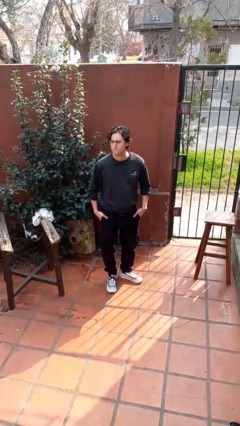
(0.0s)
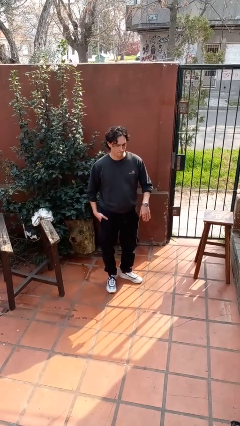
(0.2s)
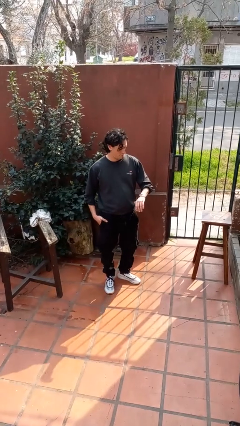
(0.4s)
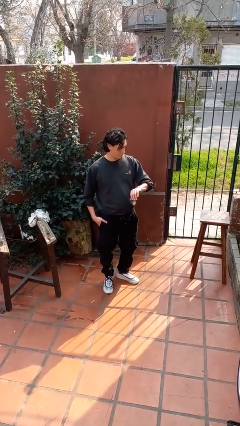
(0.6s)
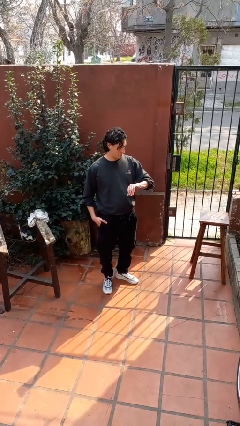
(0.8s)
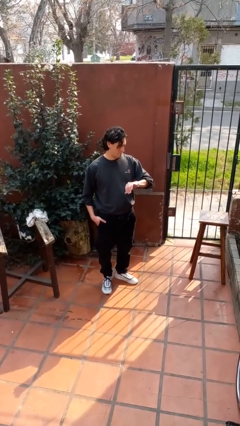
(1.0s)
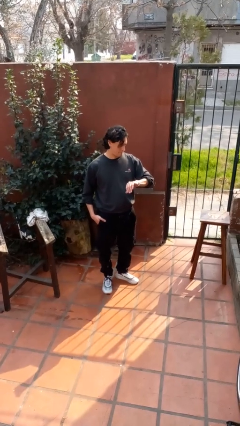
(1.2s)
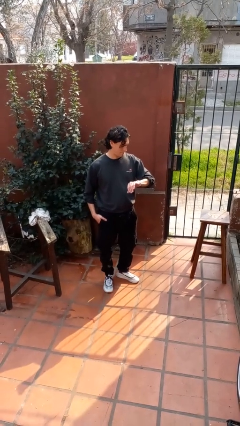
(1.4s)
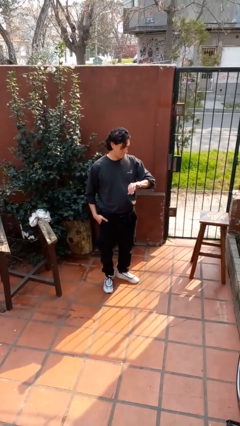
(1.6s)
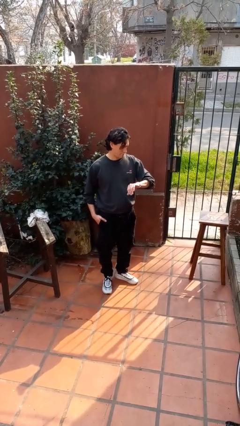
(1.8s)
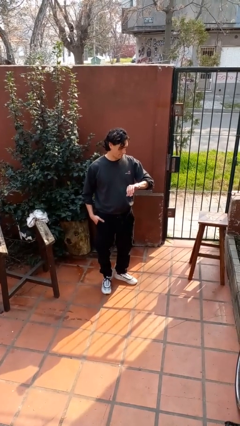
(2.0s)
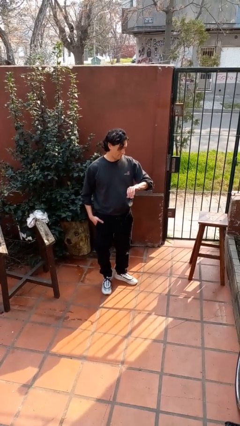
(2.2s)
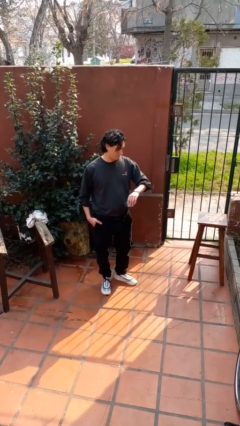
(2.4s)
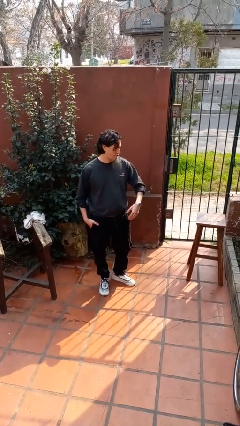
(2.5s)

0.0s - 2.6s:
person looks at wristwatch

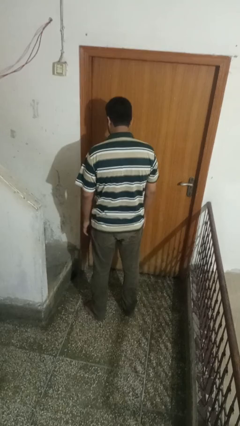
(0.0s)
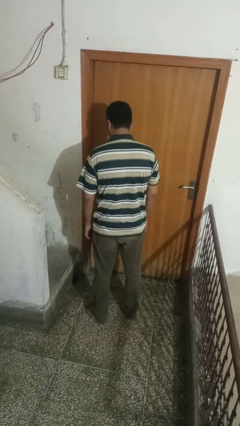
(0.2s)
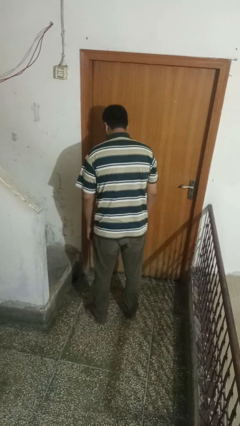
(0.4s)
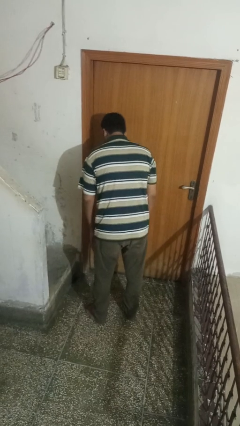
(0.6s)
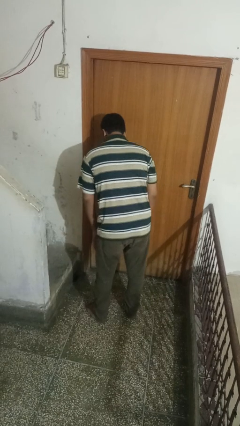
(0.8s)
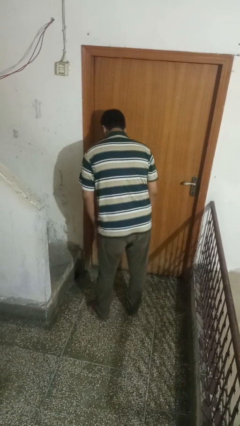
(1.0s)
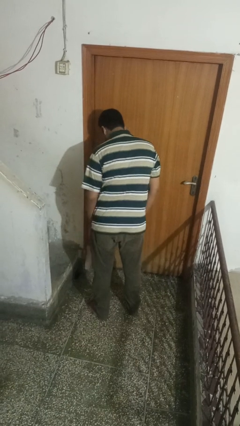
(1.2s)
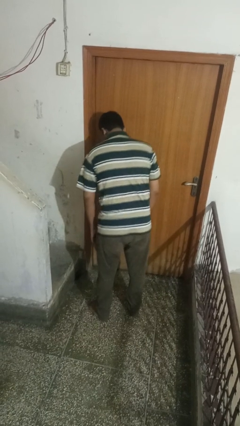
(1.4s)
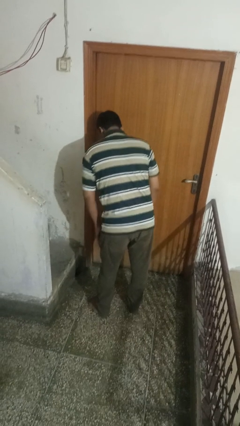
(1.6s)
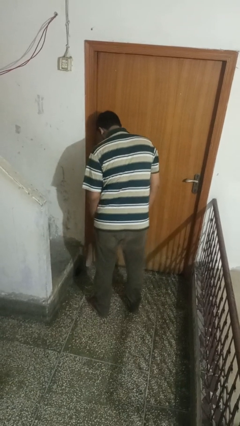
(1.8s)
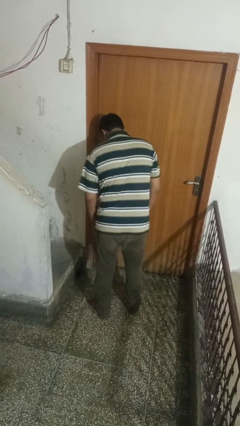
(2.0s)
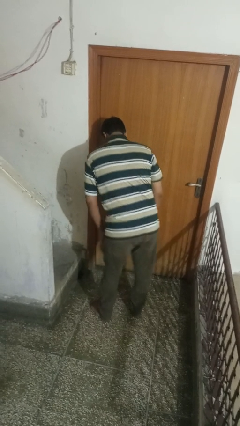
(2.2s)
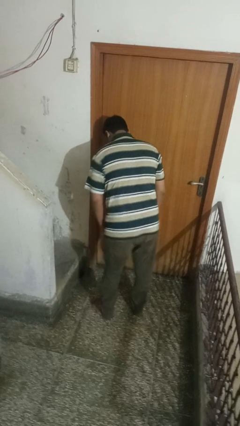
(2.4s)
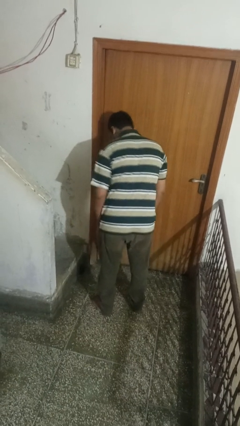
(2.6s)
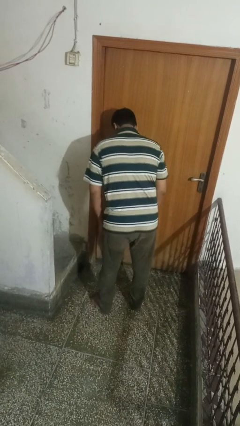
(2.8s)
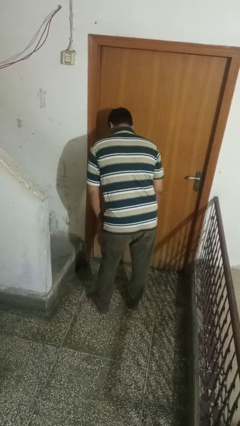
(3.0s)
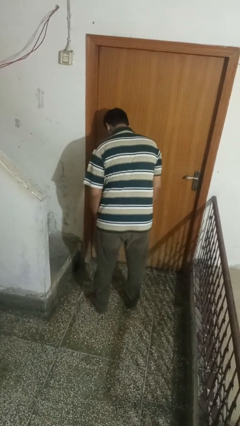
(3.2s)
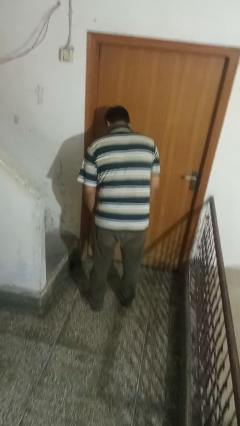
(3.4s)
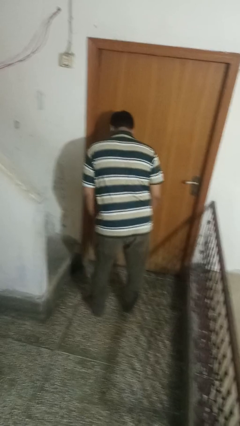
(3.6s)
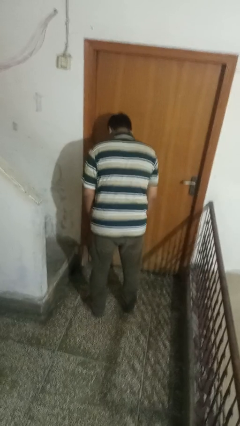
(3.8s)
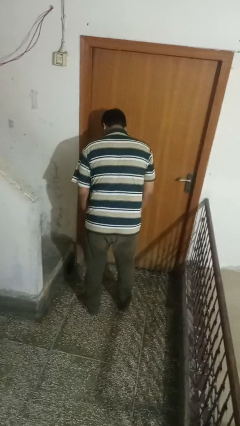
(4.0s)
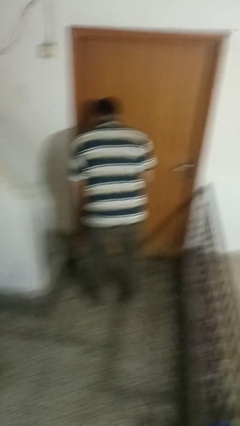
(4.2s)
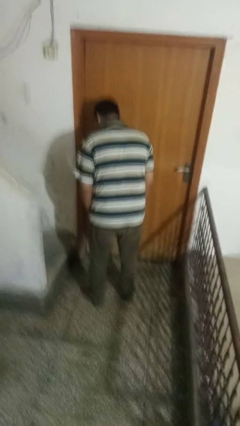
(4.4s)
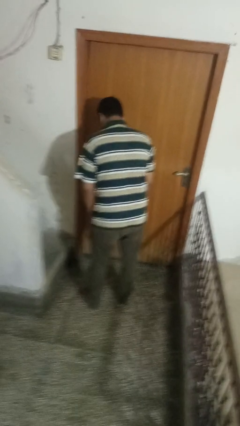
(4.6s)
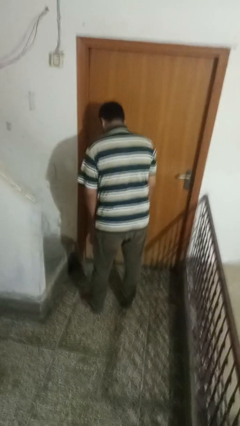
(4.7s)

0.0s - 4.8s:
person wiggles hips

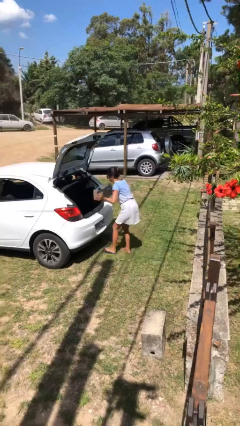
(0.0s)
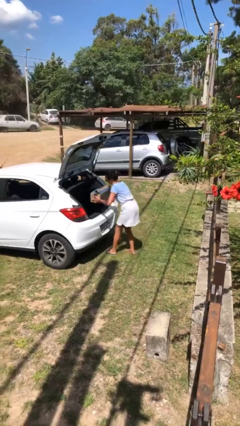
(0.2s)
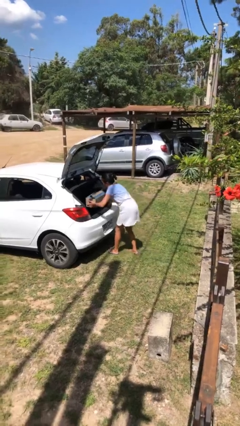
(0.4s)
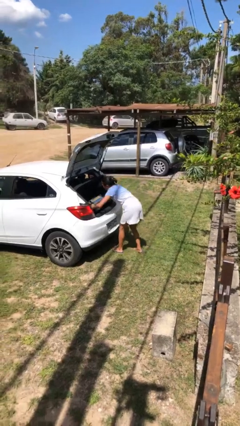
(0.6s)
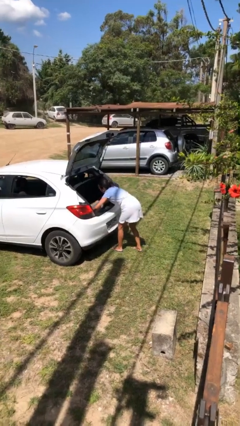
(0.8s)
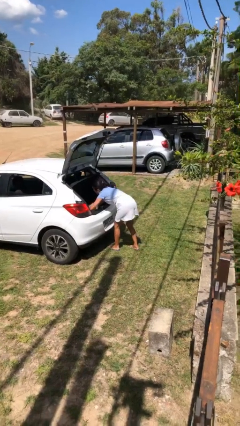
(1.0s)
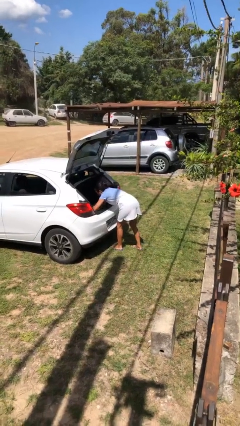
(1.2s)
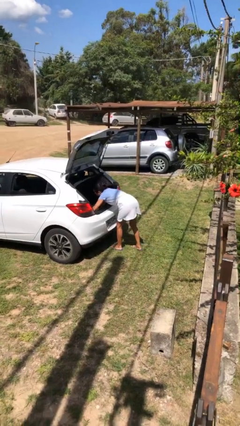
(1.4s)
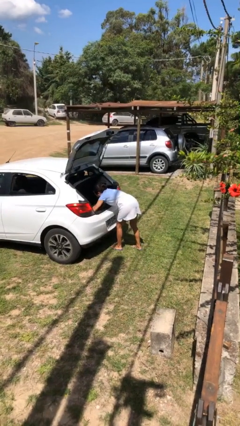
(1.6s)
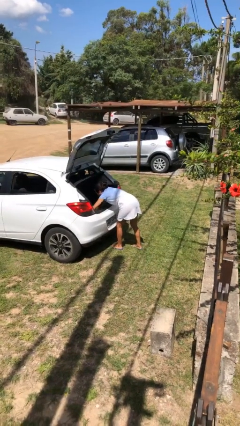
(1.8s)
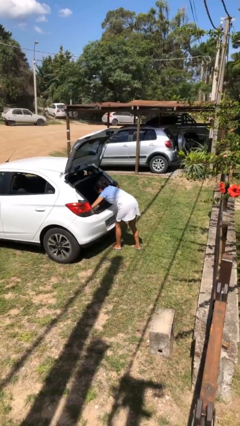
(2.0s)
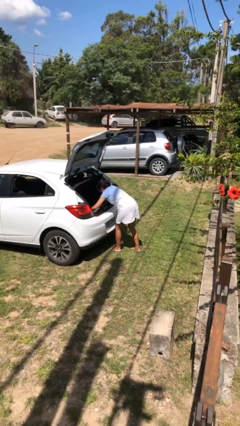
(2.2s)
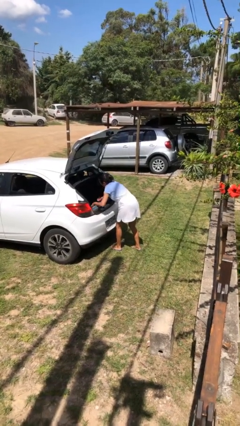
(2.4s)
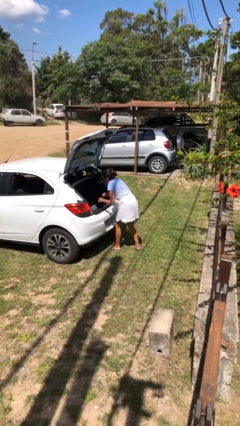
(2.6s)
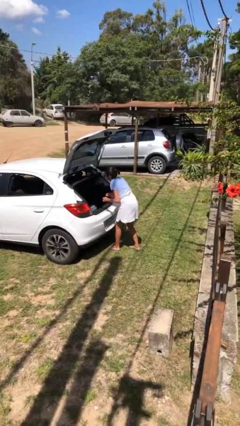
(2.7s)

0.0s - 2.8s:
person loads car

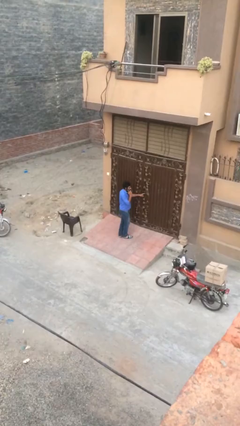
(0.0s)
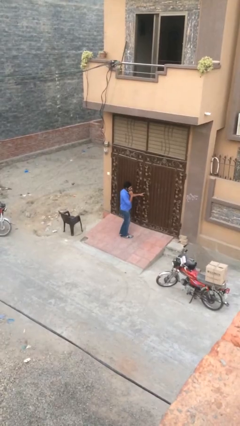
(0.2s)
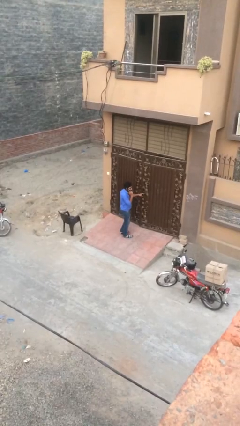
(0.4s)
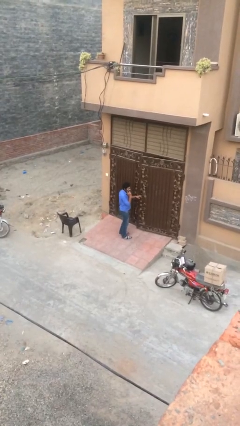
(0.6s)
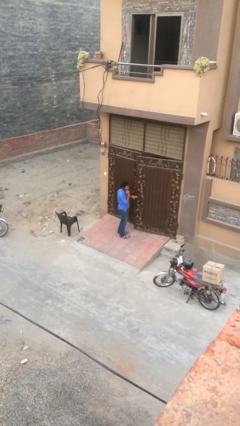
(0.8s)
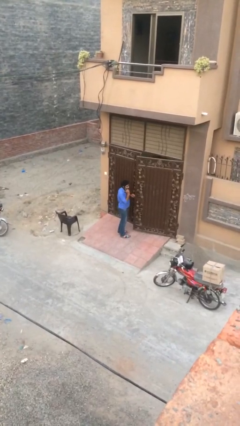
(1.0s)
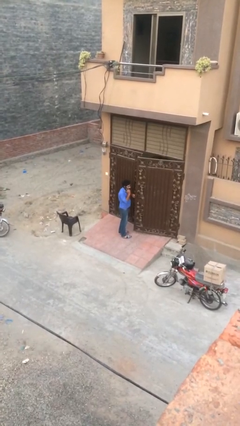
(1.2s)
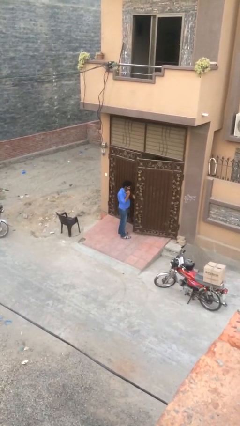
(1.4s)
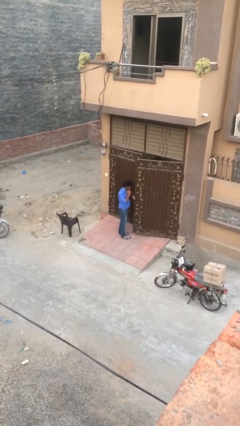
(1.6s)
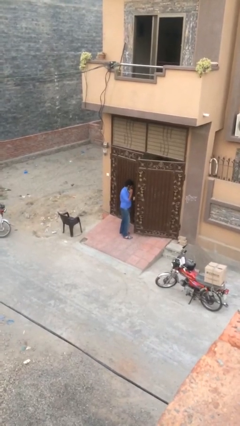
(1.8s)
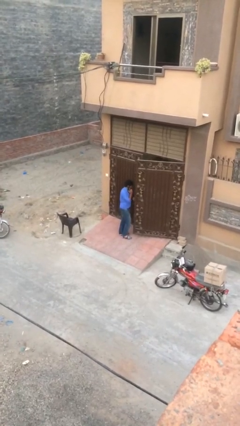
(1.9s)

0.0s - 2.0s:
person opens facility door

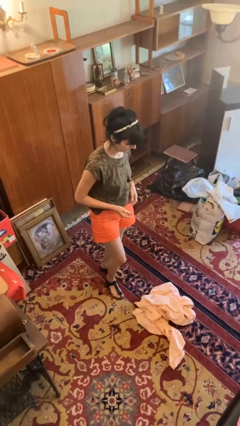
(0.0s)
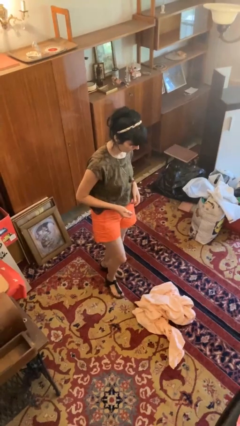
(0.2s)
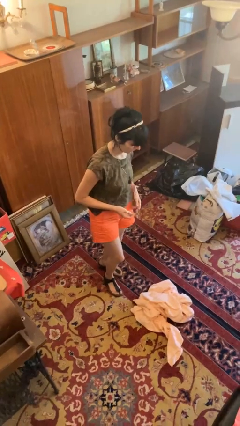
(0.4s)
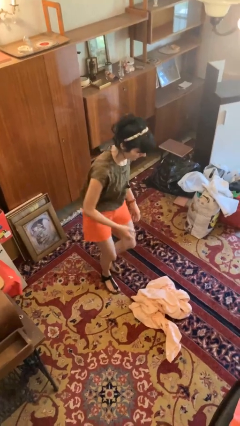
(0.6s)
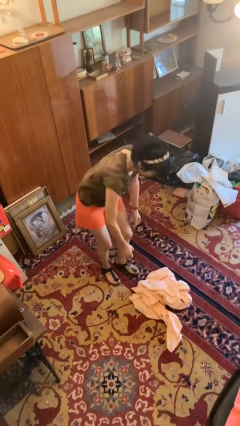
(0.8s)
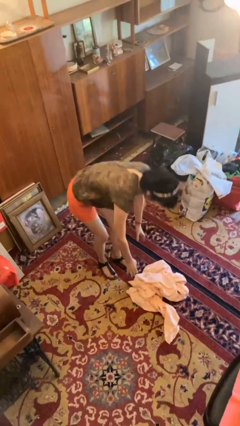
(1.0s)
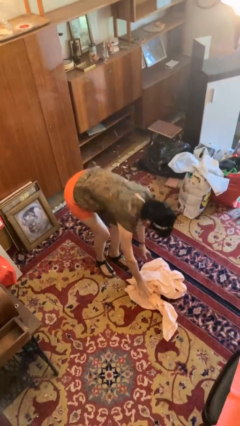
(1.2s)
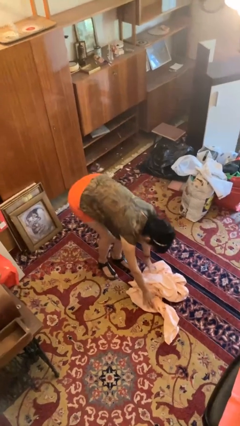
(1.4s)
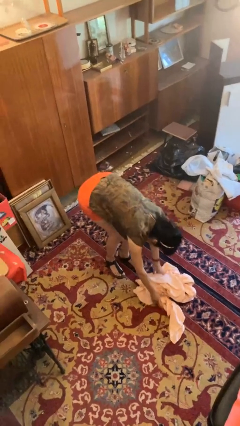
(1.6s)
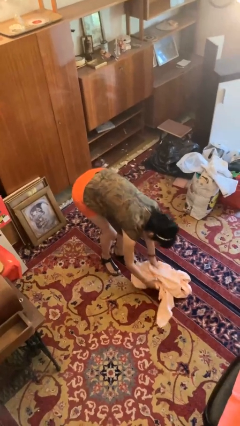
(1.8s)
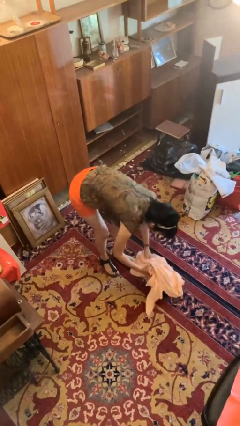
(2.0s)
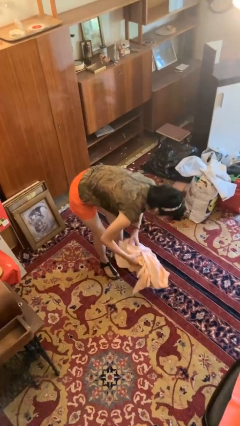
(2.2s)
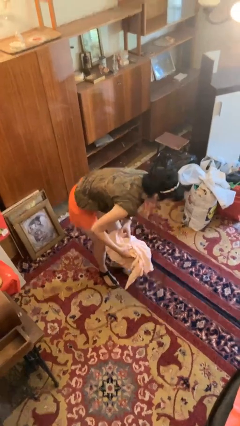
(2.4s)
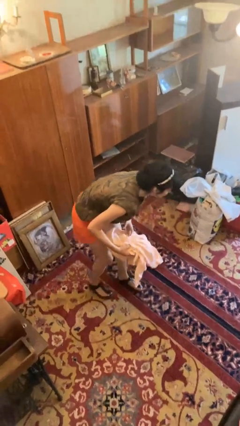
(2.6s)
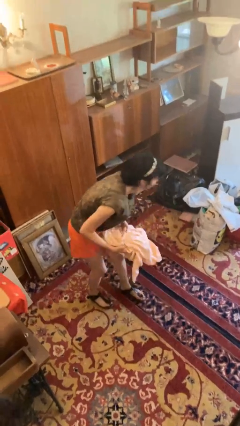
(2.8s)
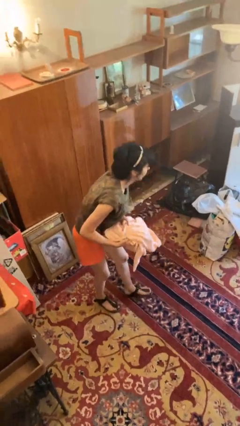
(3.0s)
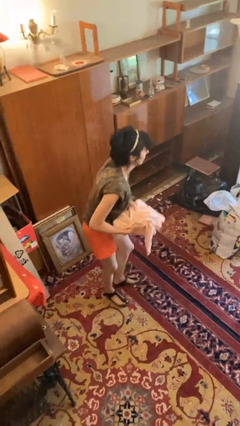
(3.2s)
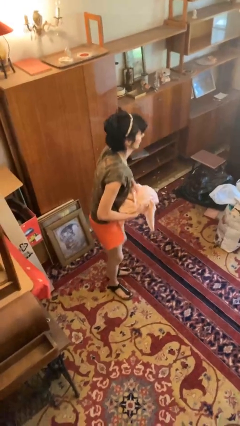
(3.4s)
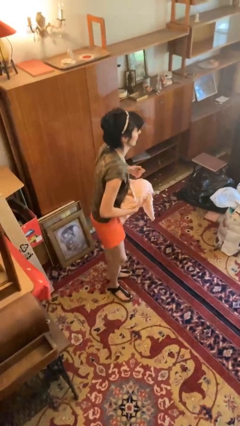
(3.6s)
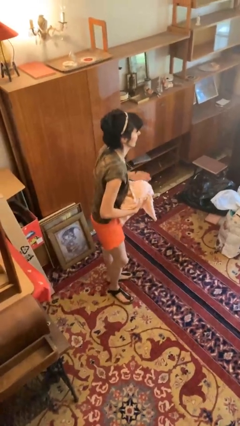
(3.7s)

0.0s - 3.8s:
person picks up object from floor

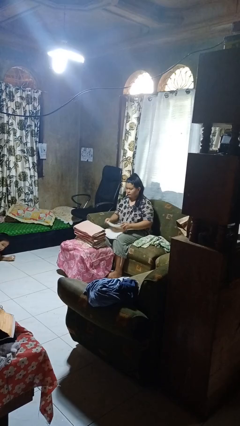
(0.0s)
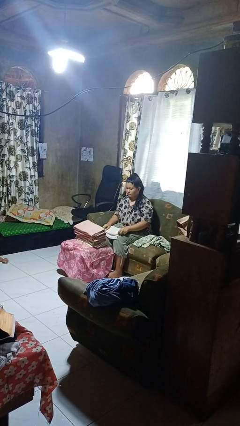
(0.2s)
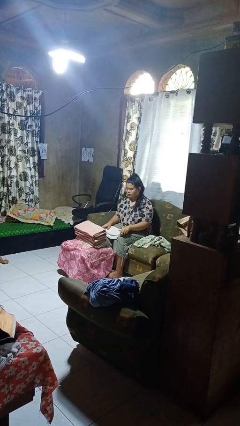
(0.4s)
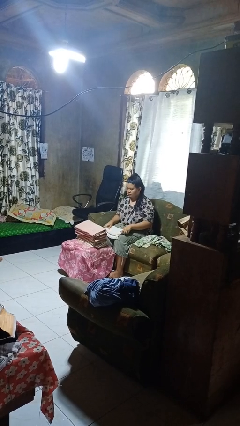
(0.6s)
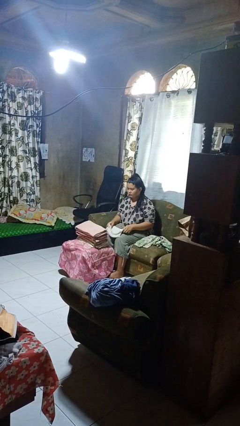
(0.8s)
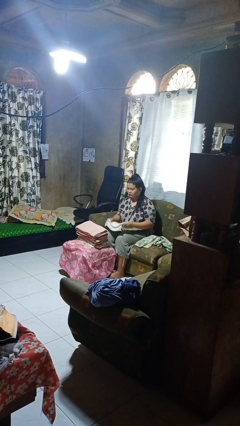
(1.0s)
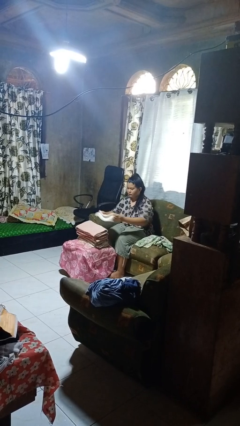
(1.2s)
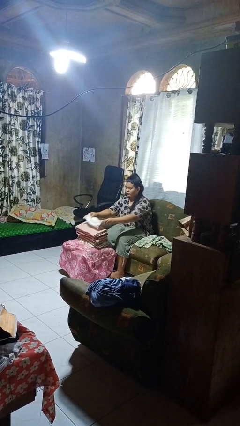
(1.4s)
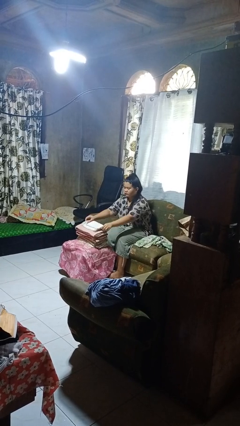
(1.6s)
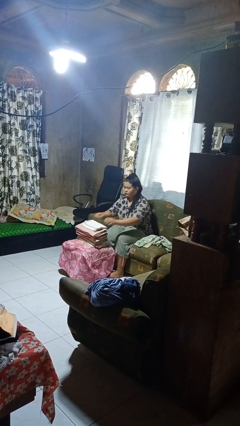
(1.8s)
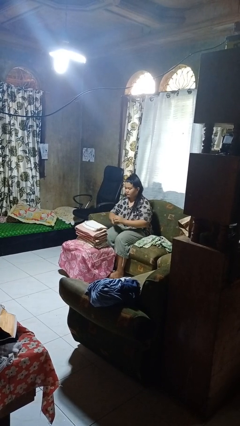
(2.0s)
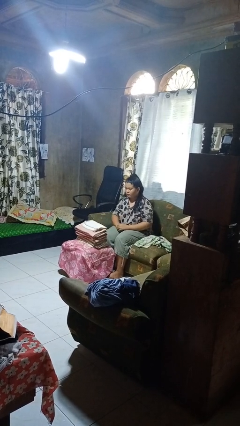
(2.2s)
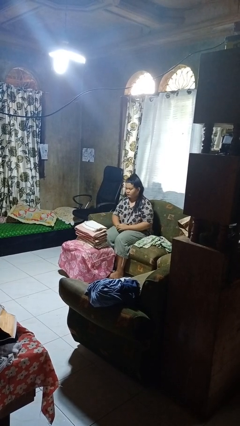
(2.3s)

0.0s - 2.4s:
person folds towel
